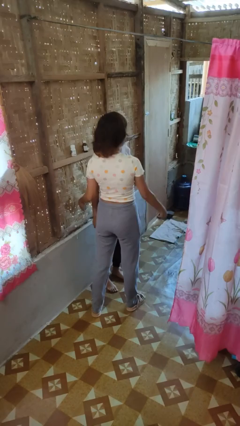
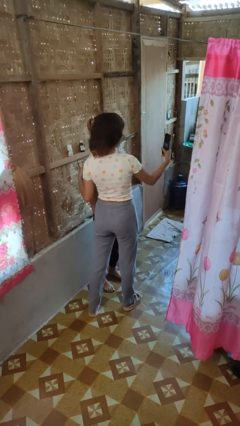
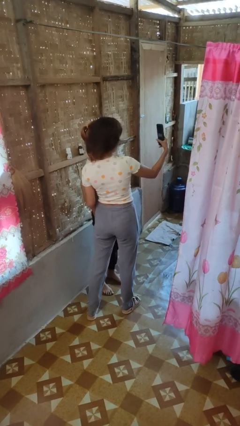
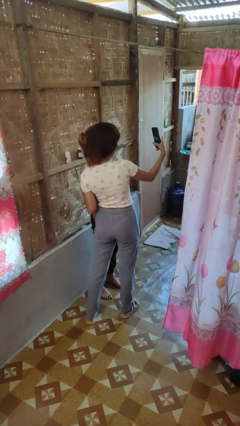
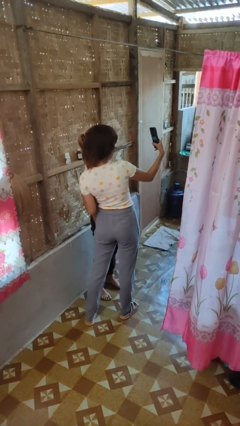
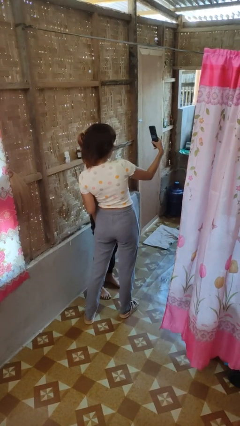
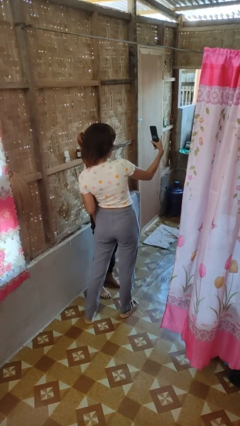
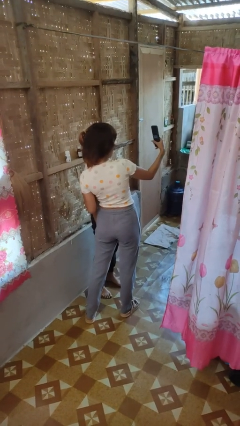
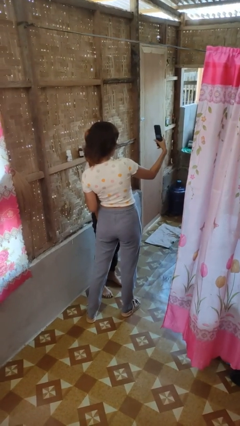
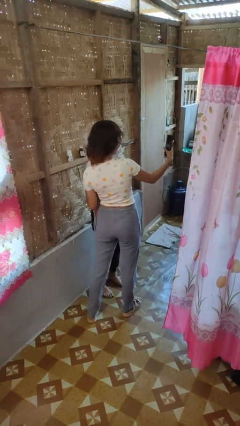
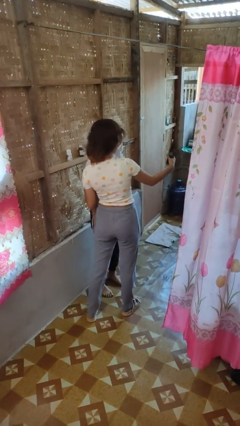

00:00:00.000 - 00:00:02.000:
person takes selfie with person

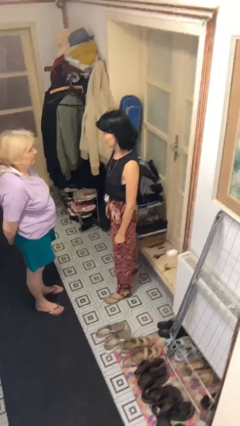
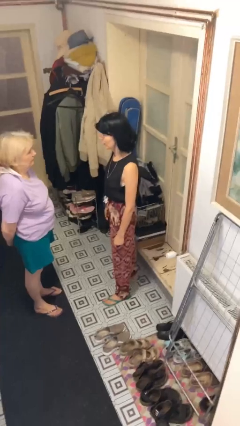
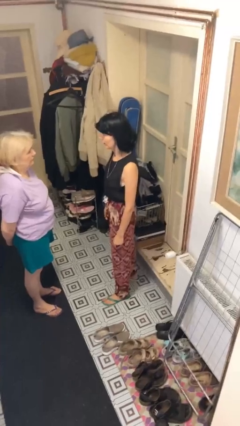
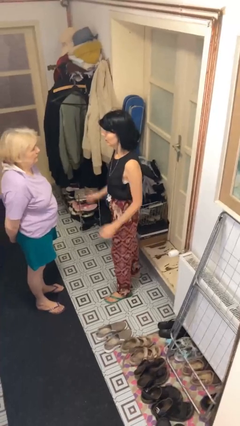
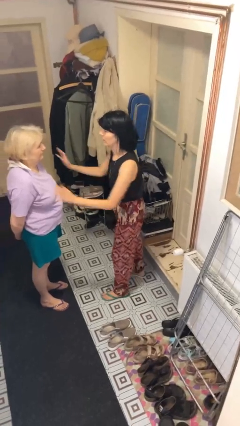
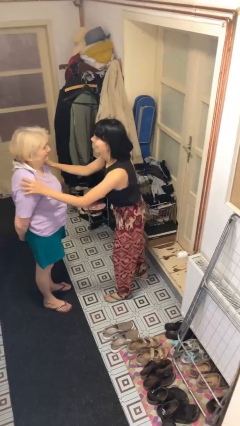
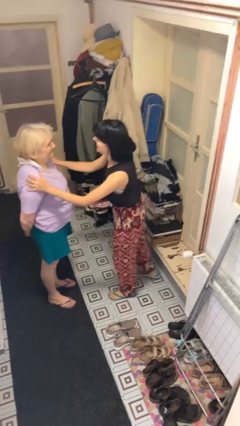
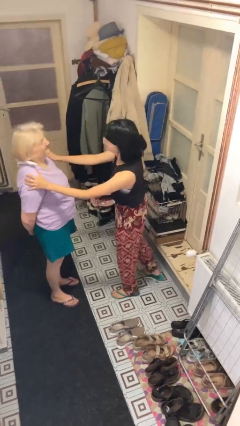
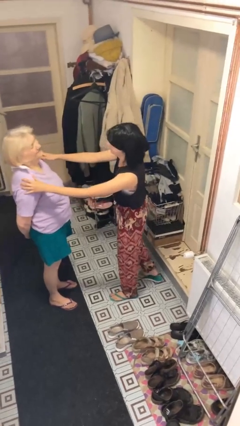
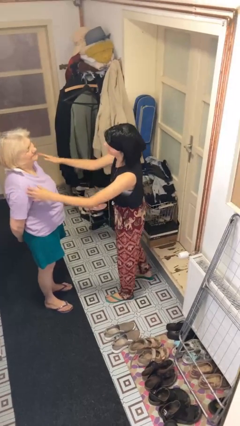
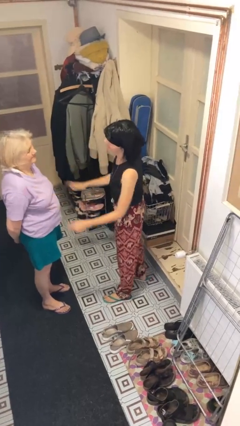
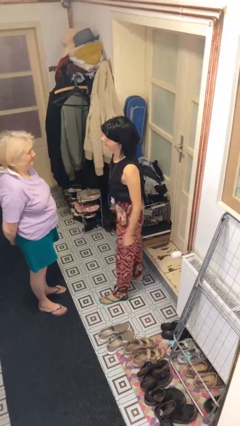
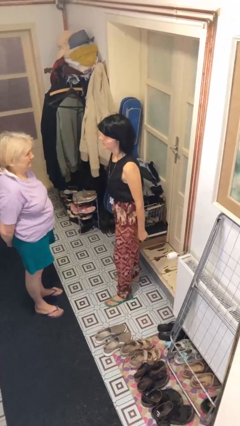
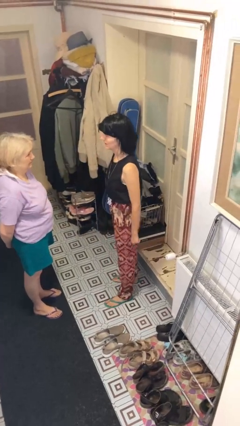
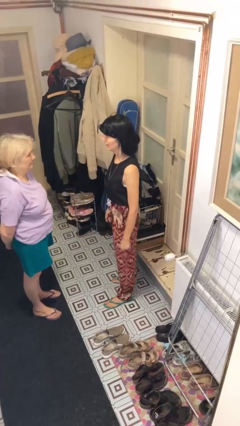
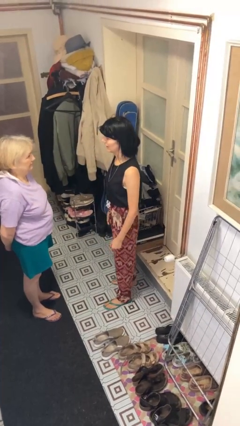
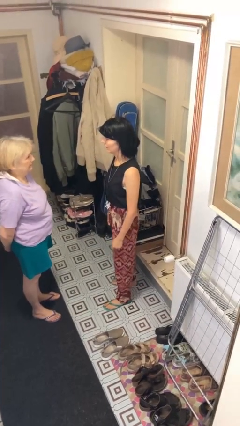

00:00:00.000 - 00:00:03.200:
person shoves person

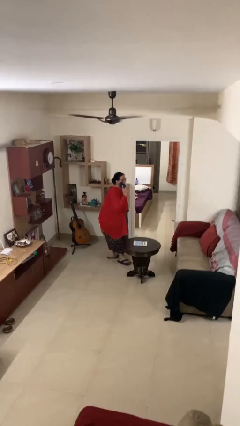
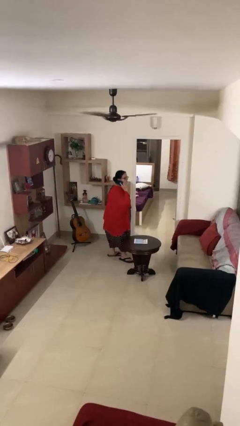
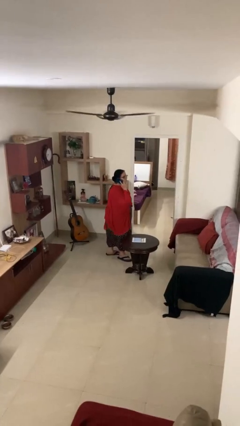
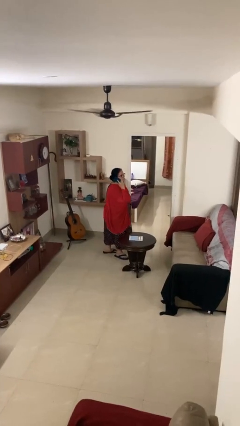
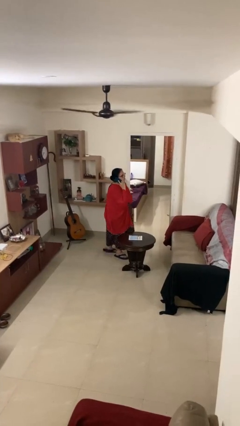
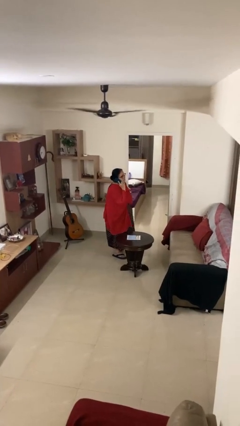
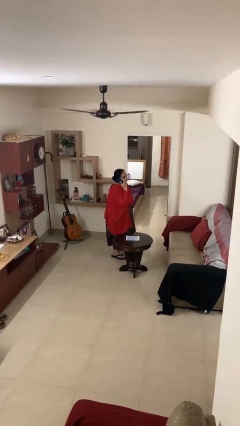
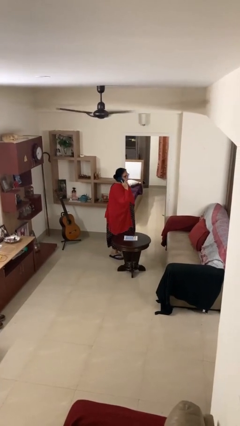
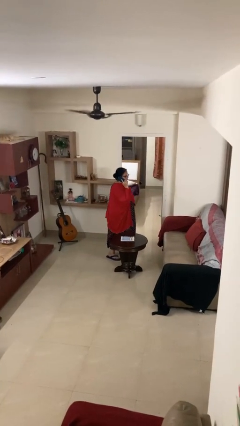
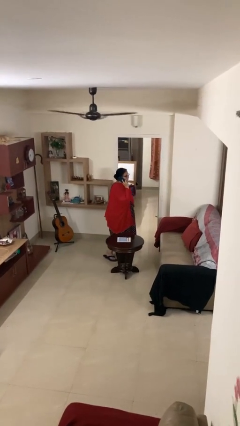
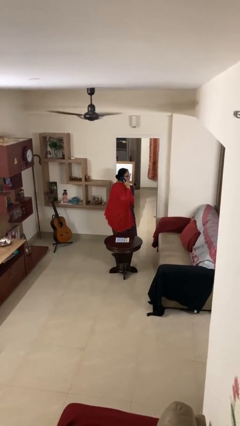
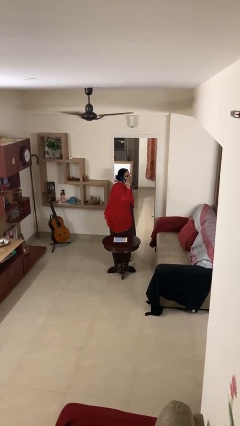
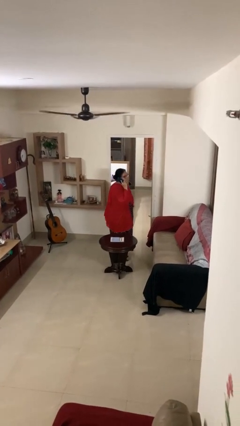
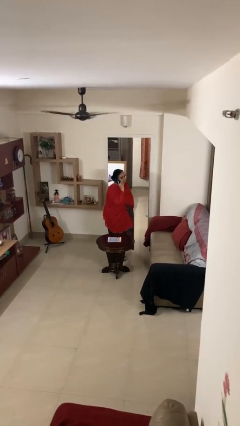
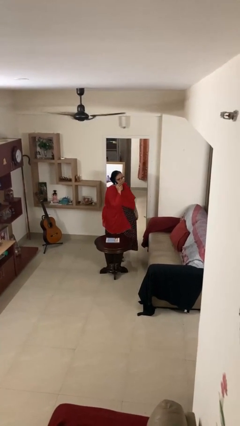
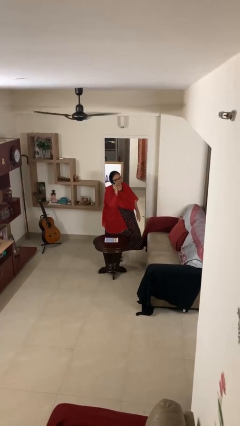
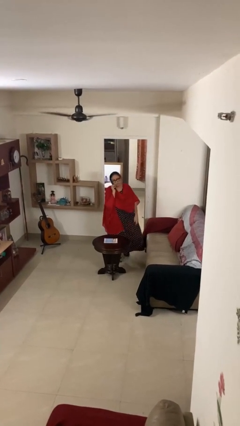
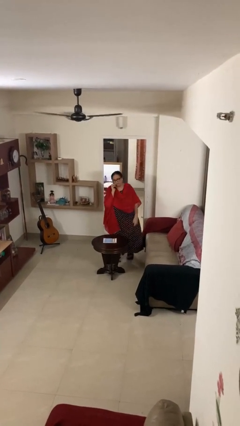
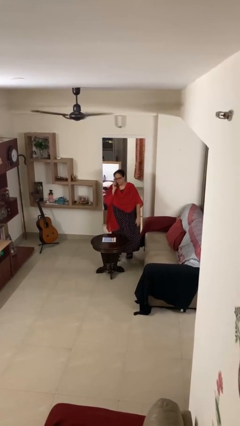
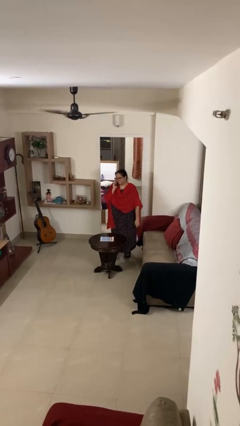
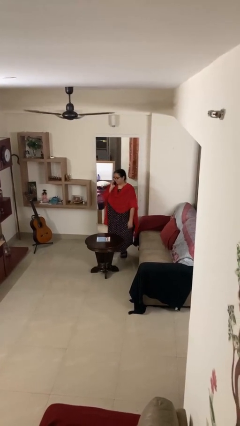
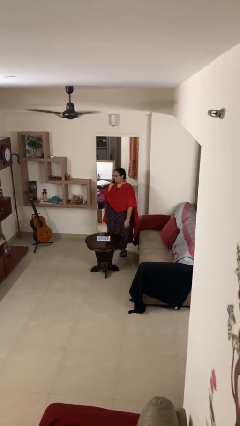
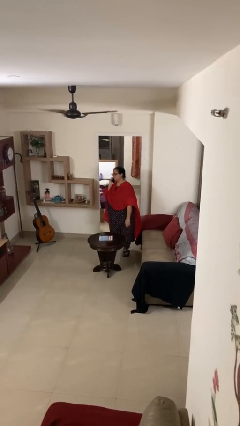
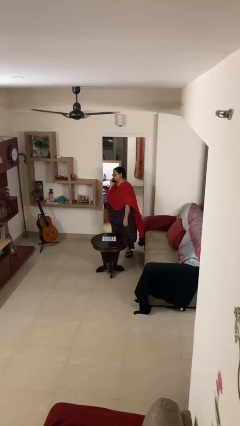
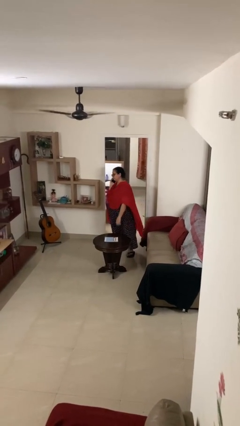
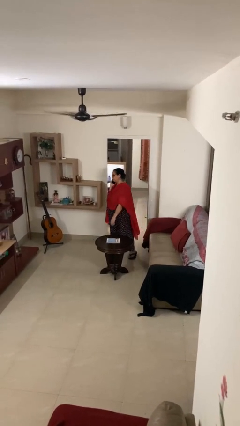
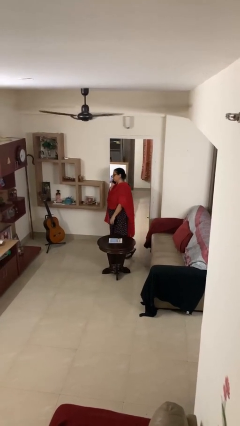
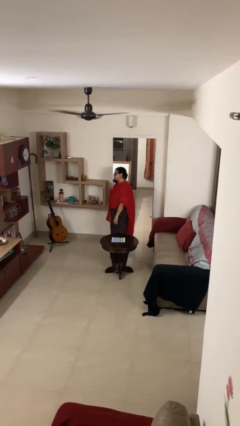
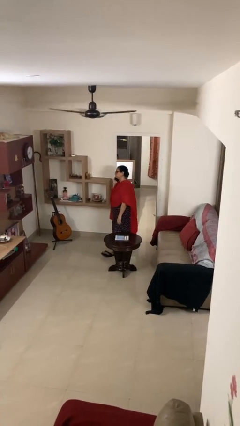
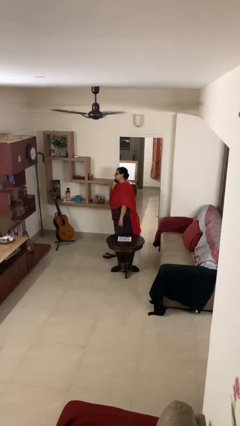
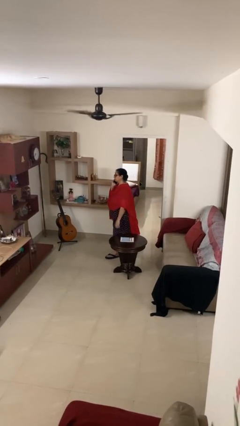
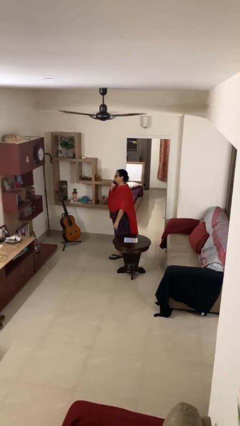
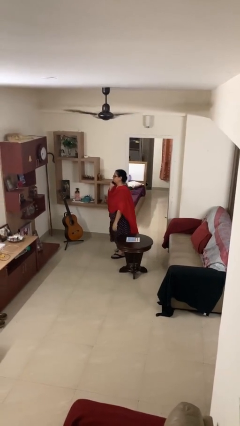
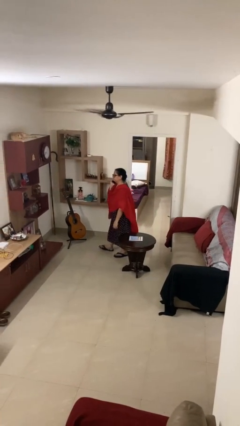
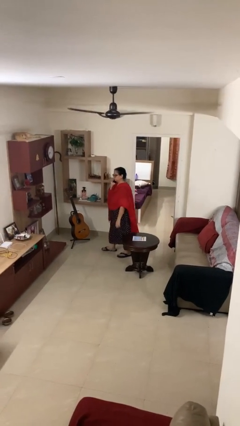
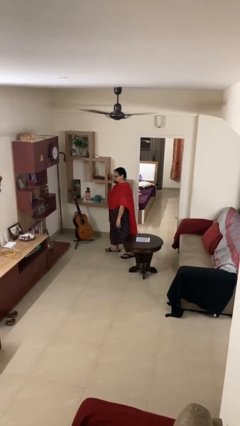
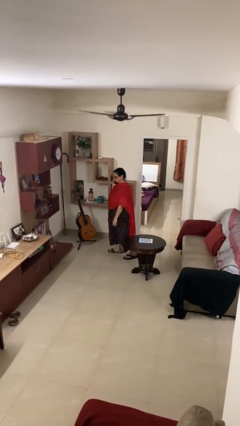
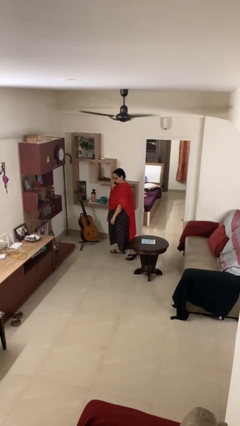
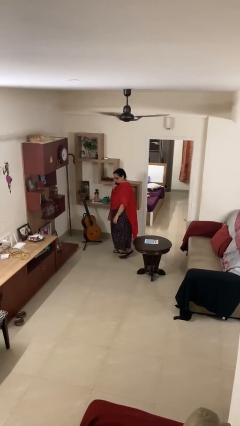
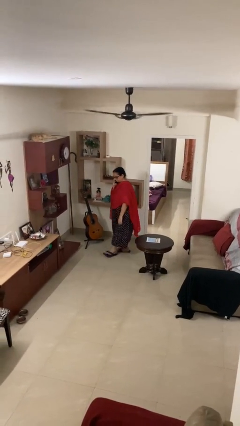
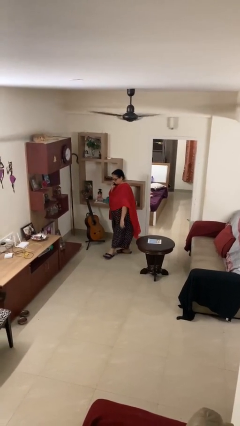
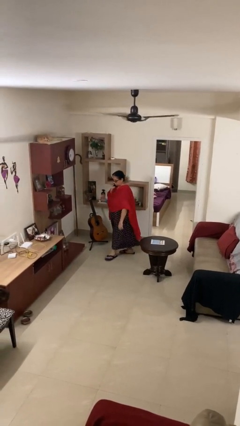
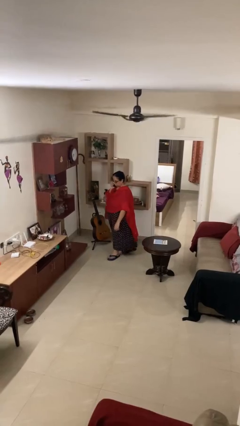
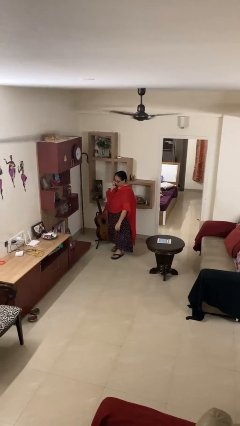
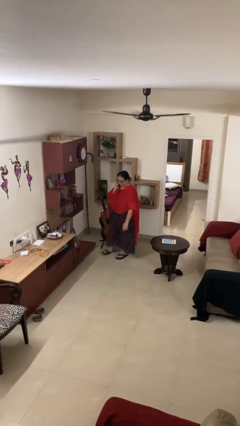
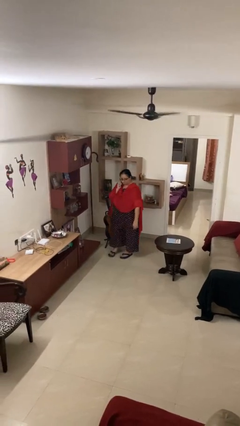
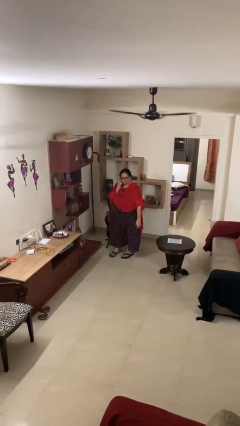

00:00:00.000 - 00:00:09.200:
person talks on phone

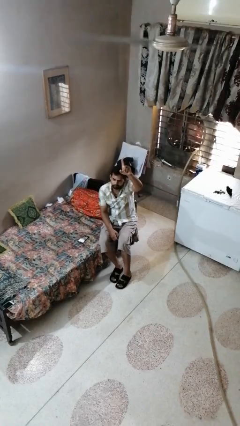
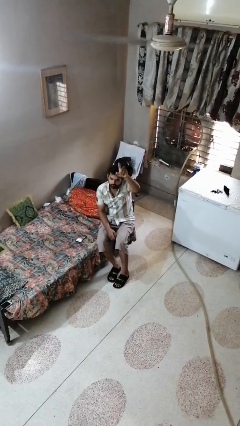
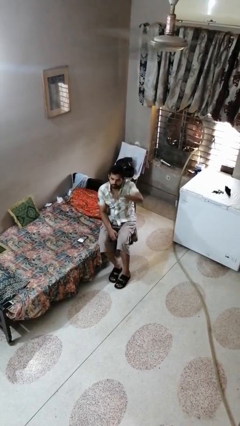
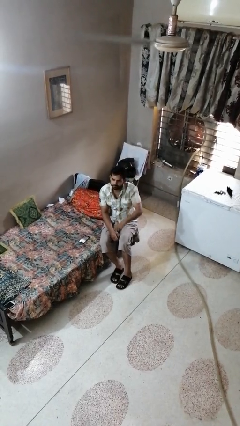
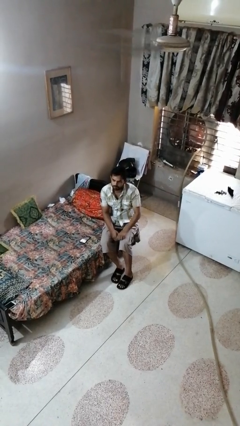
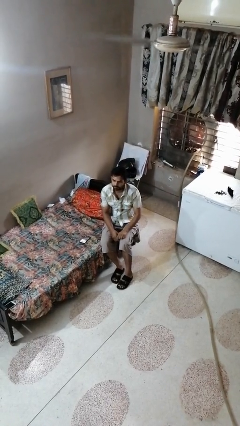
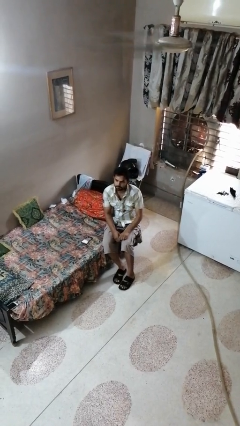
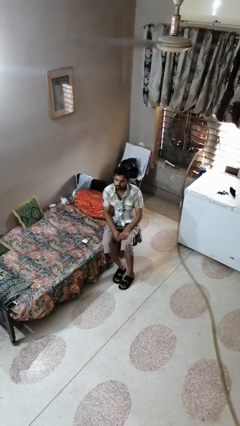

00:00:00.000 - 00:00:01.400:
person gestures lower hand

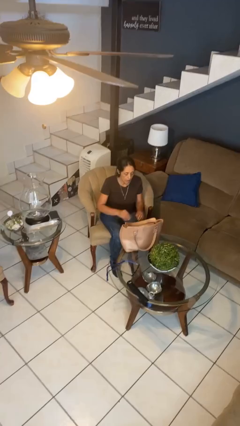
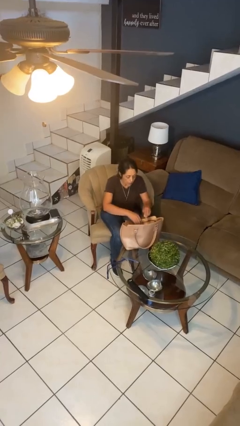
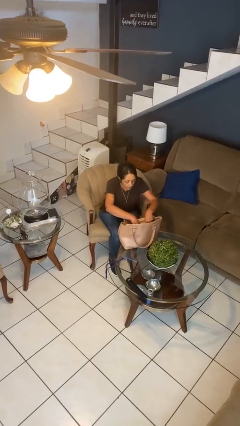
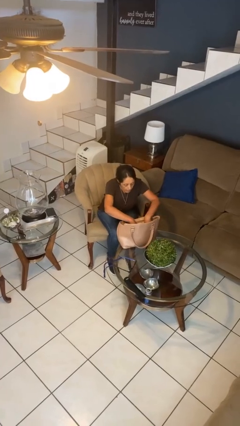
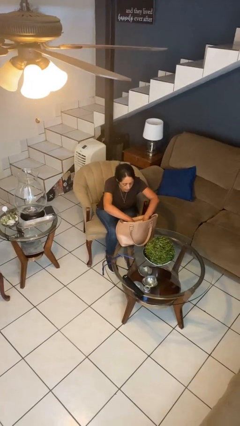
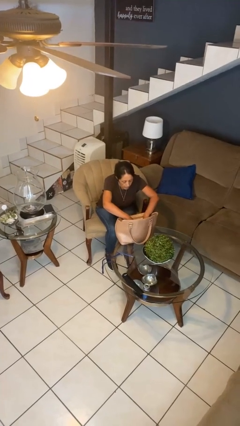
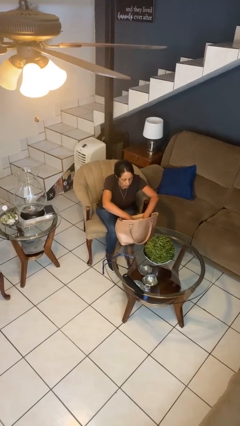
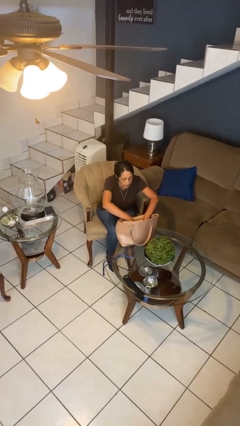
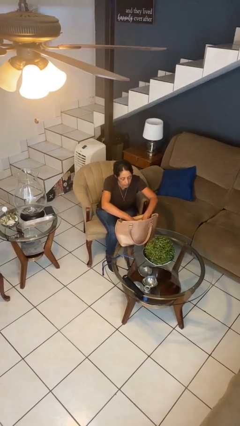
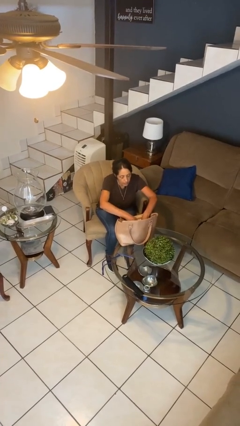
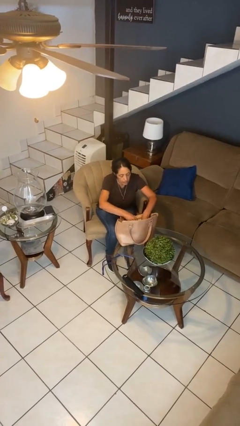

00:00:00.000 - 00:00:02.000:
person searches in purse
